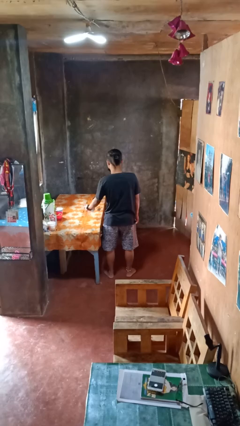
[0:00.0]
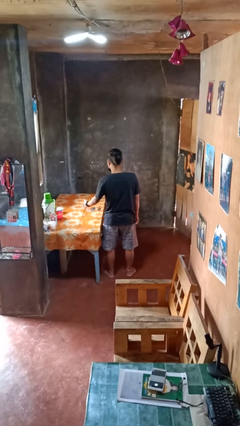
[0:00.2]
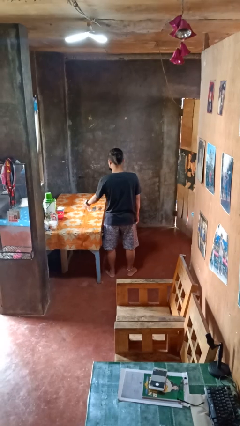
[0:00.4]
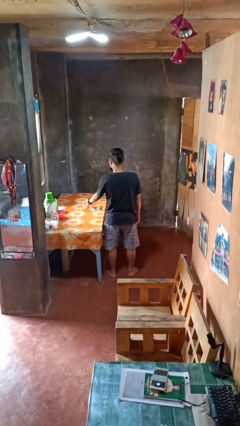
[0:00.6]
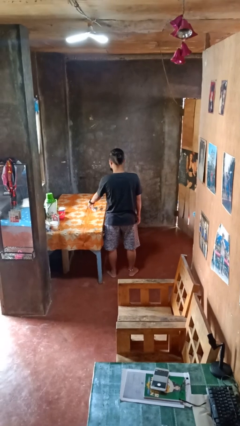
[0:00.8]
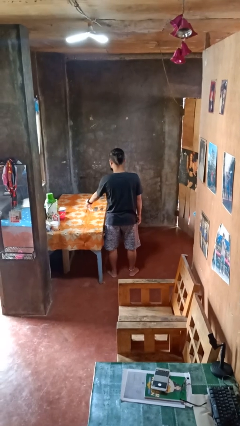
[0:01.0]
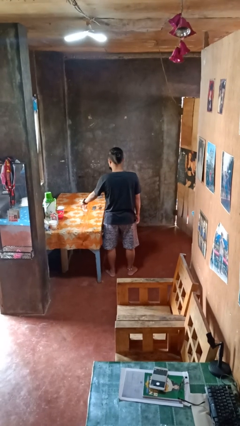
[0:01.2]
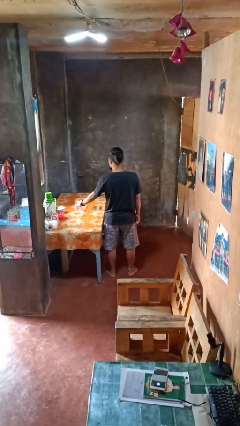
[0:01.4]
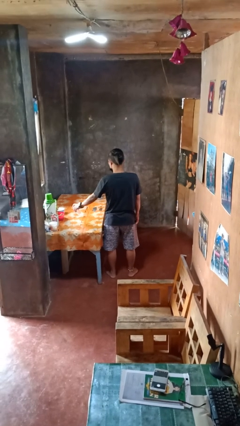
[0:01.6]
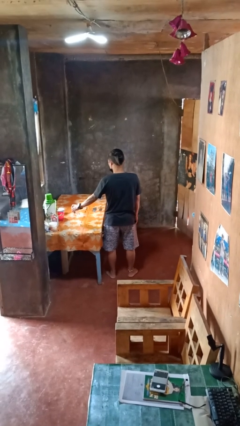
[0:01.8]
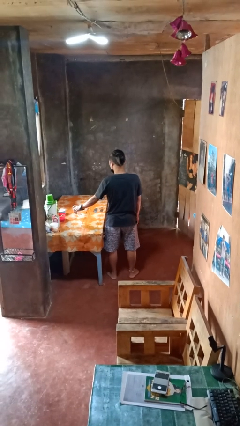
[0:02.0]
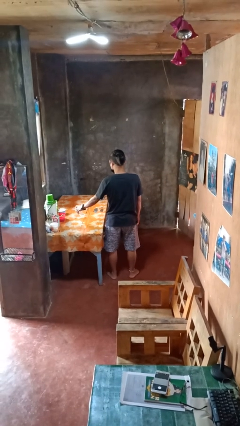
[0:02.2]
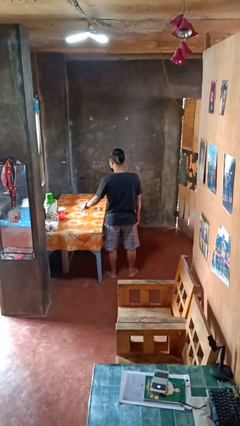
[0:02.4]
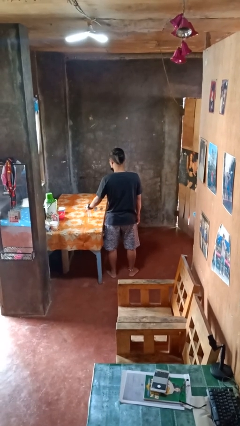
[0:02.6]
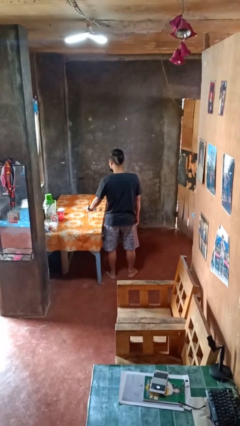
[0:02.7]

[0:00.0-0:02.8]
person sprays from bottle

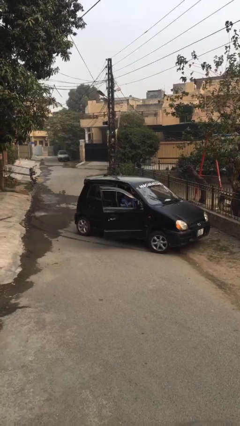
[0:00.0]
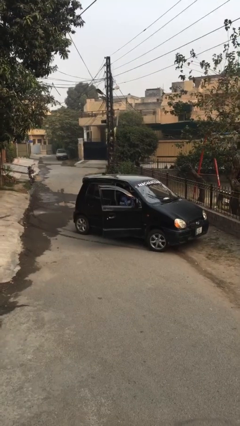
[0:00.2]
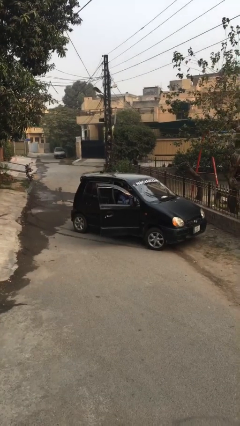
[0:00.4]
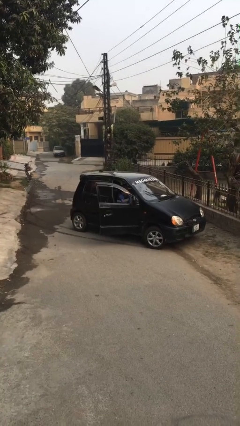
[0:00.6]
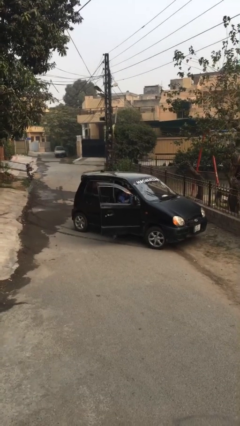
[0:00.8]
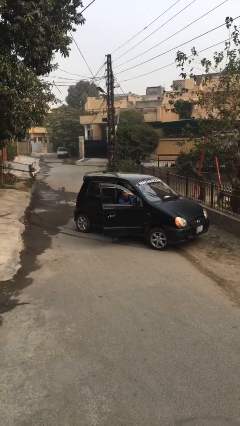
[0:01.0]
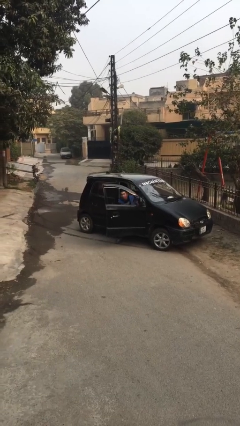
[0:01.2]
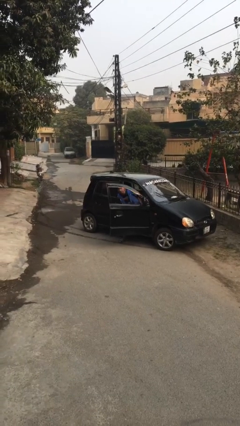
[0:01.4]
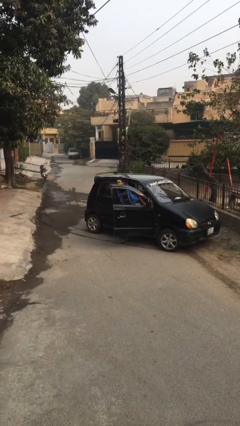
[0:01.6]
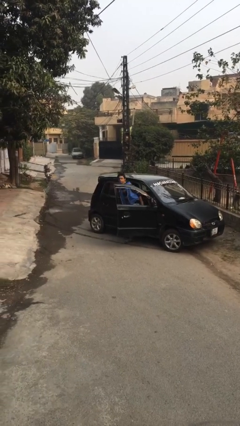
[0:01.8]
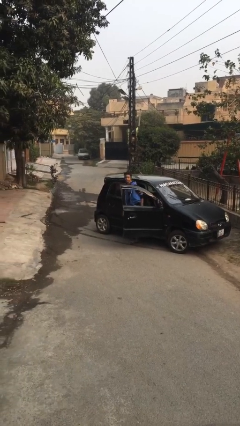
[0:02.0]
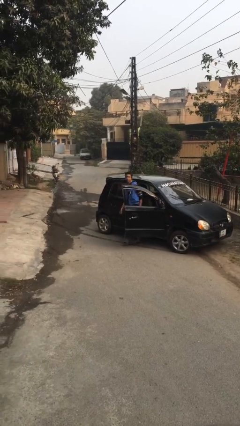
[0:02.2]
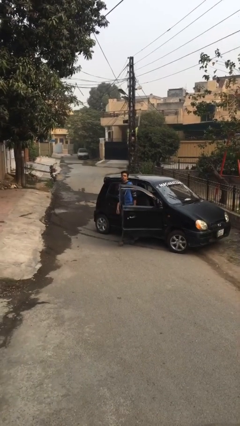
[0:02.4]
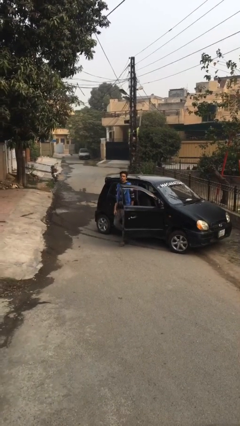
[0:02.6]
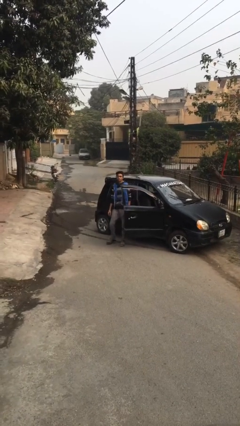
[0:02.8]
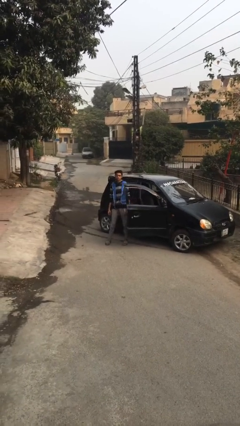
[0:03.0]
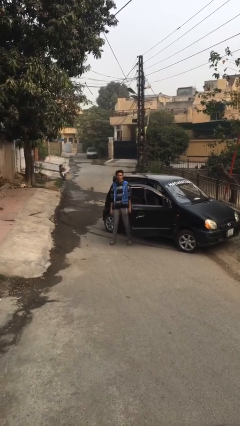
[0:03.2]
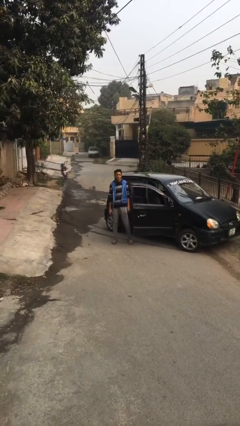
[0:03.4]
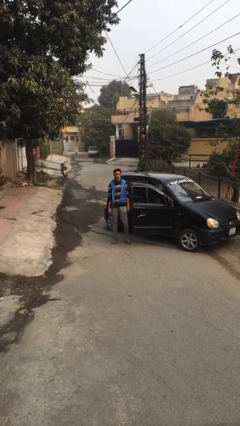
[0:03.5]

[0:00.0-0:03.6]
person exits car

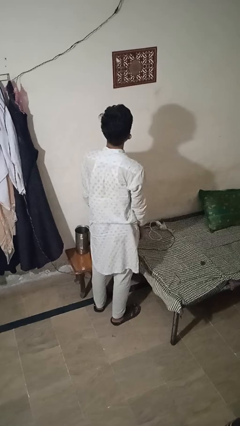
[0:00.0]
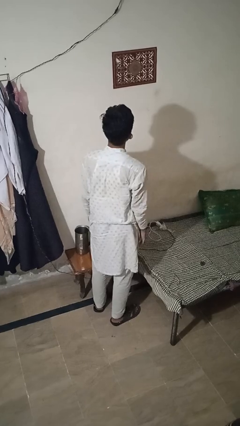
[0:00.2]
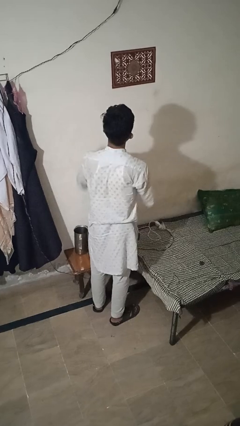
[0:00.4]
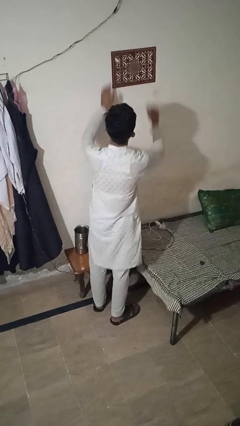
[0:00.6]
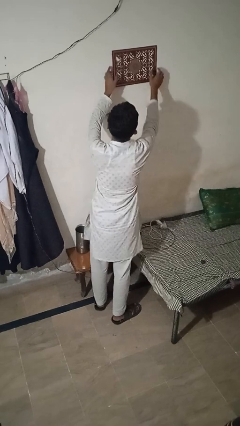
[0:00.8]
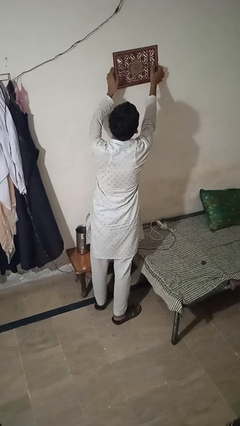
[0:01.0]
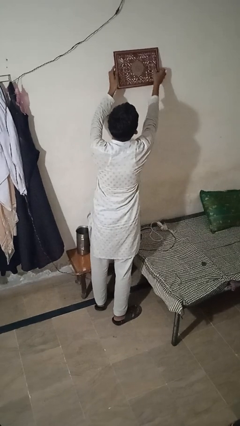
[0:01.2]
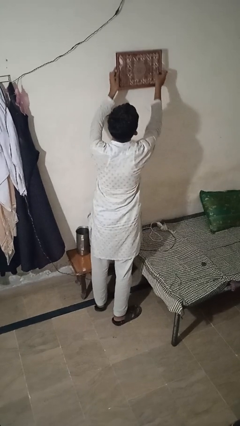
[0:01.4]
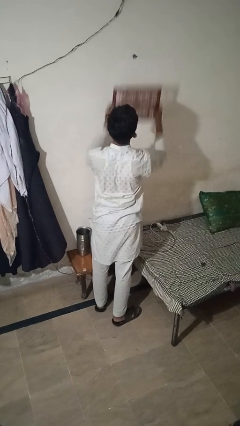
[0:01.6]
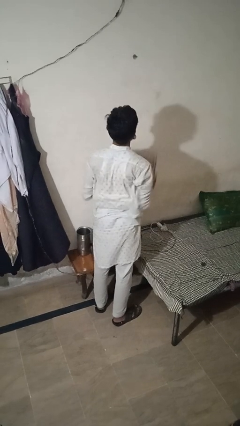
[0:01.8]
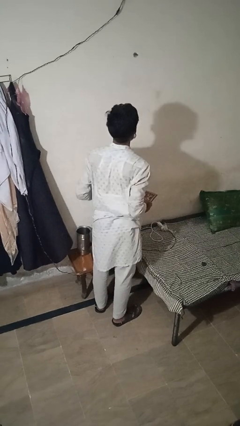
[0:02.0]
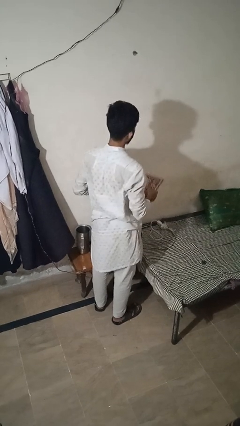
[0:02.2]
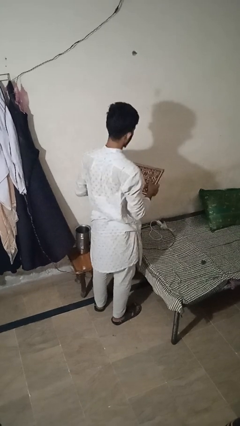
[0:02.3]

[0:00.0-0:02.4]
person takes down picture frame

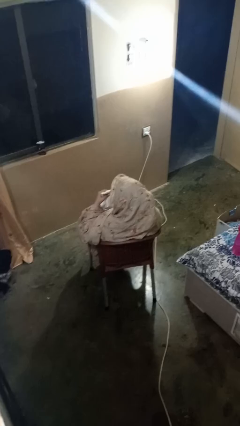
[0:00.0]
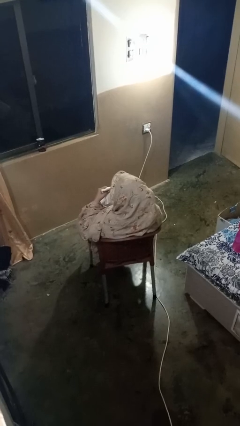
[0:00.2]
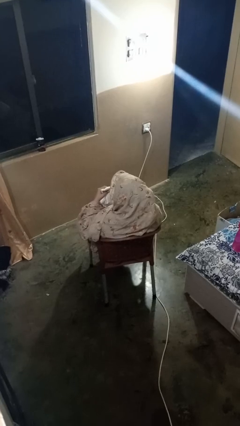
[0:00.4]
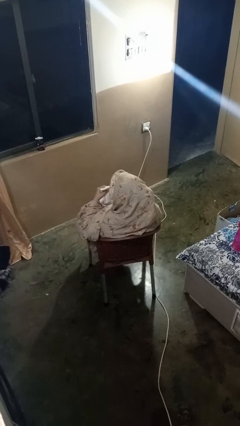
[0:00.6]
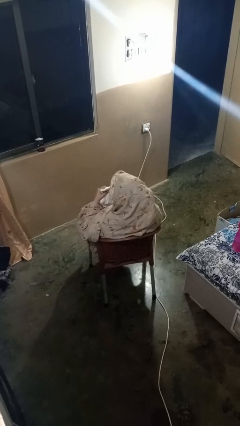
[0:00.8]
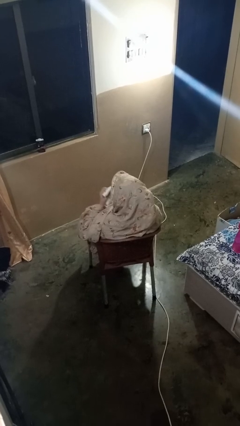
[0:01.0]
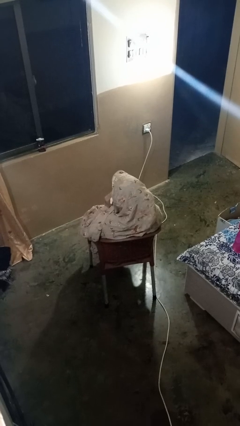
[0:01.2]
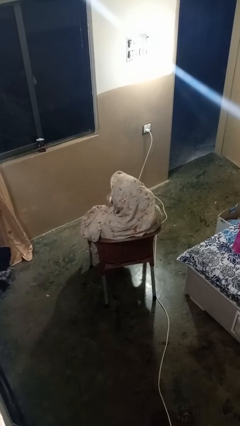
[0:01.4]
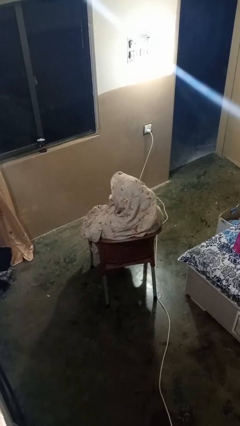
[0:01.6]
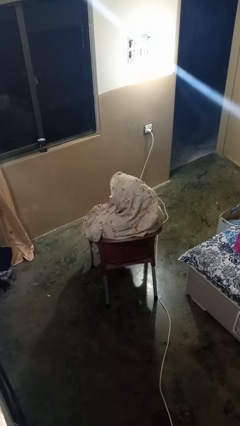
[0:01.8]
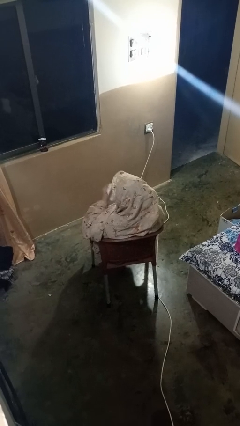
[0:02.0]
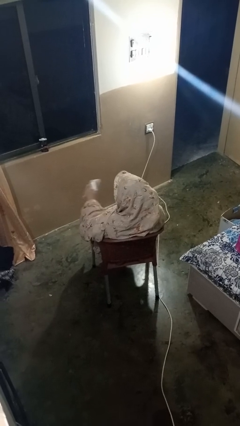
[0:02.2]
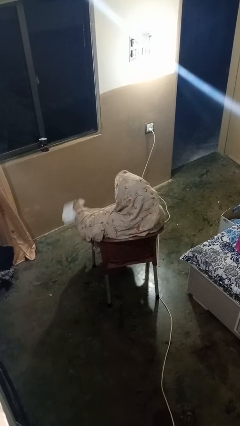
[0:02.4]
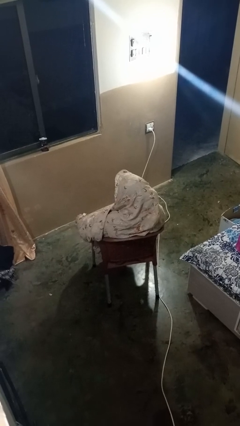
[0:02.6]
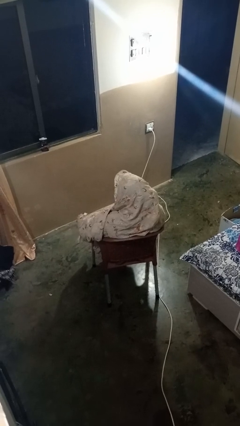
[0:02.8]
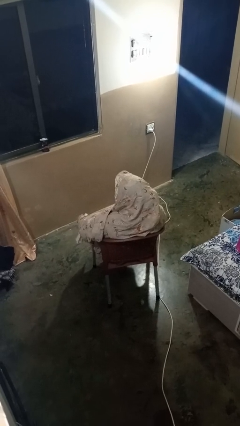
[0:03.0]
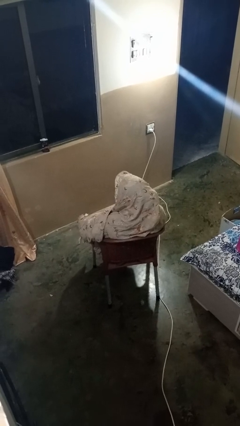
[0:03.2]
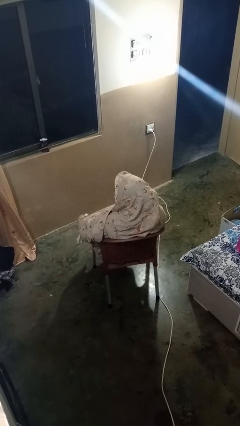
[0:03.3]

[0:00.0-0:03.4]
person wipes mouth with napkin

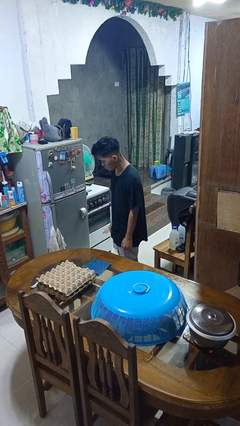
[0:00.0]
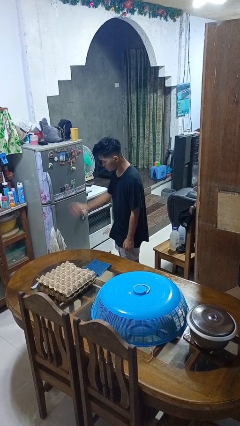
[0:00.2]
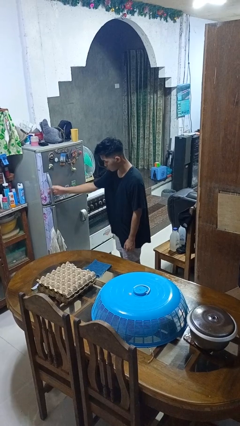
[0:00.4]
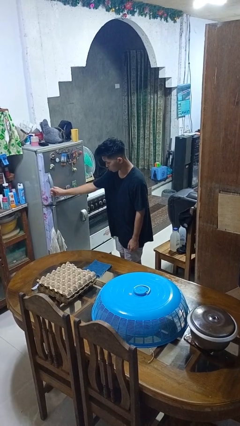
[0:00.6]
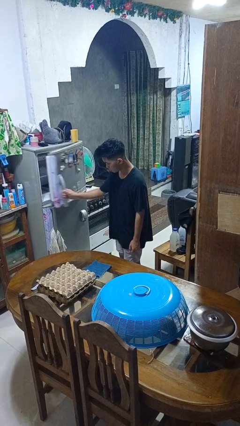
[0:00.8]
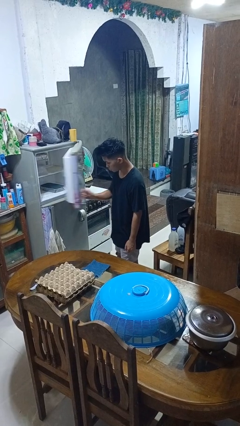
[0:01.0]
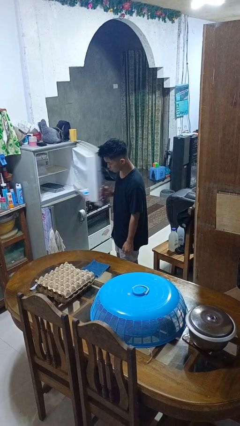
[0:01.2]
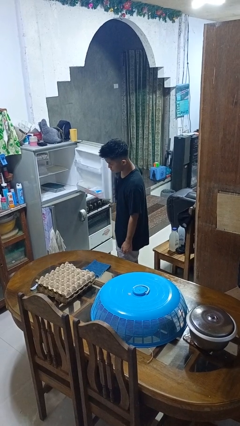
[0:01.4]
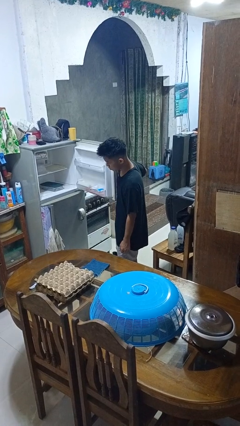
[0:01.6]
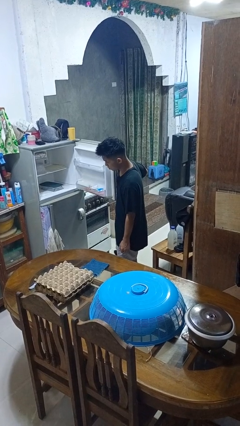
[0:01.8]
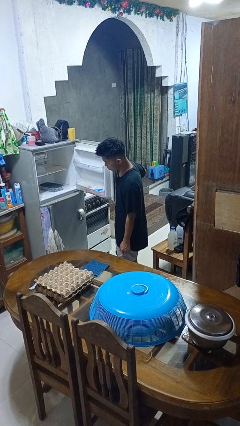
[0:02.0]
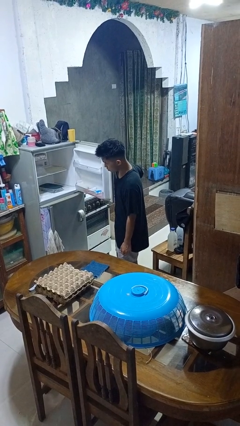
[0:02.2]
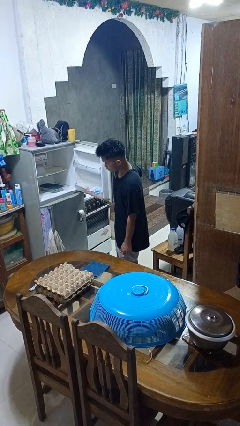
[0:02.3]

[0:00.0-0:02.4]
person opens refrigerator

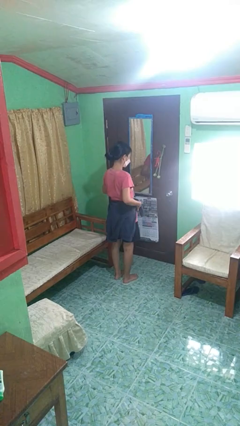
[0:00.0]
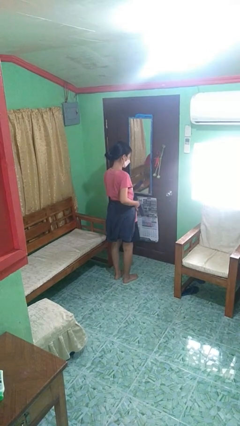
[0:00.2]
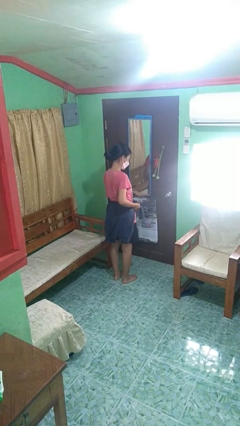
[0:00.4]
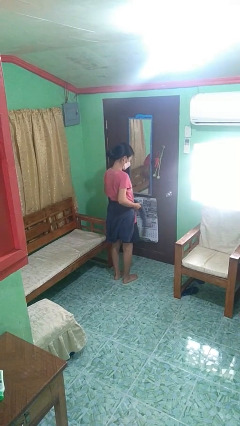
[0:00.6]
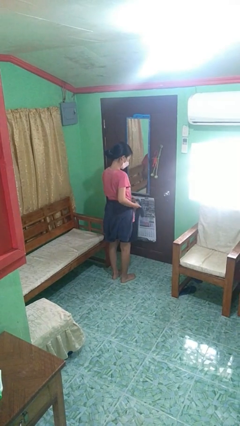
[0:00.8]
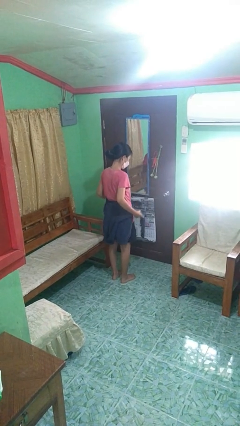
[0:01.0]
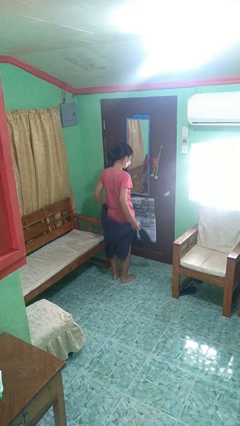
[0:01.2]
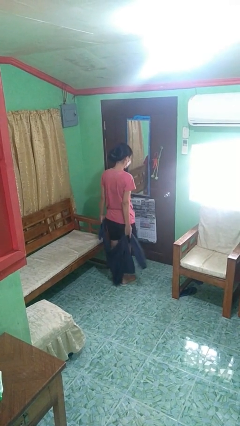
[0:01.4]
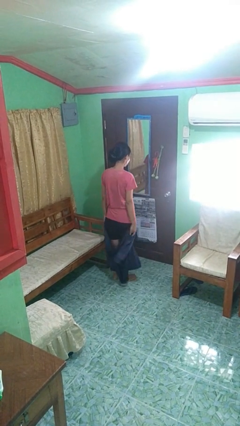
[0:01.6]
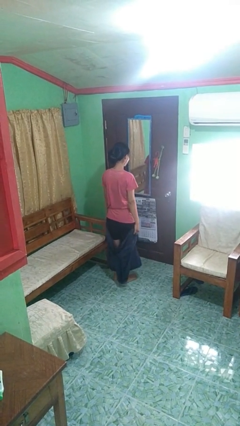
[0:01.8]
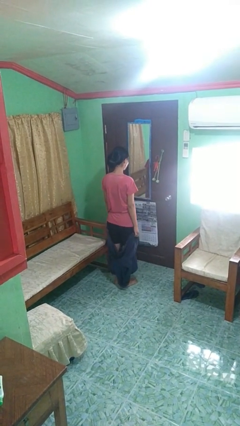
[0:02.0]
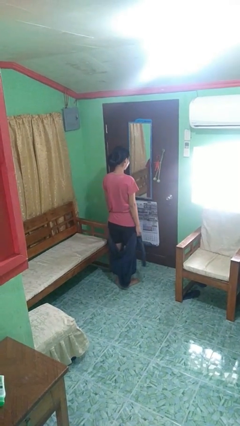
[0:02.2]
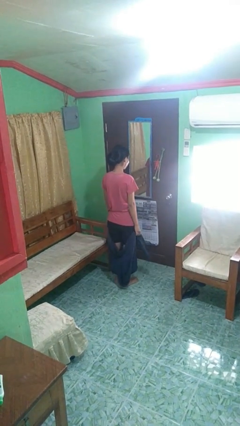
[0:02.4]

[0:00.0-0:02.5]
person unties jacket around waist

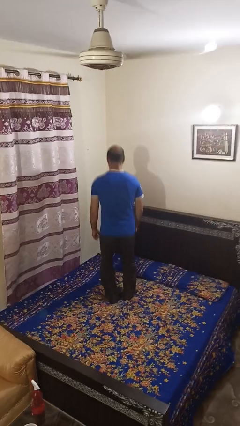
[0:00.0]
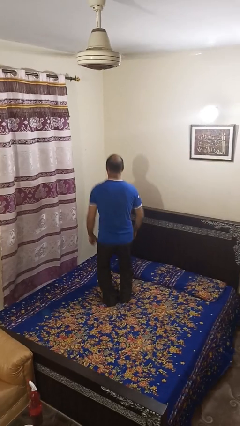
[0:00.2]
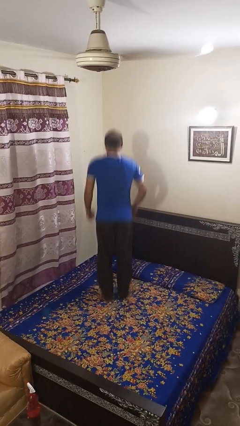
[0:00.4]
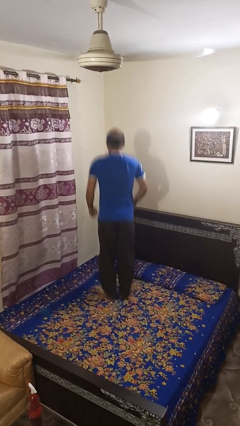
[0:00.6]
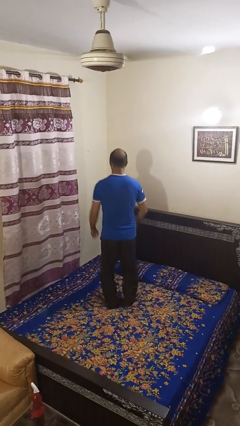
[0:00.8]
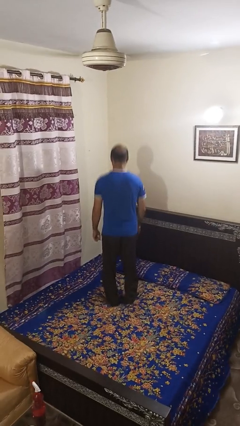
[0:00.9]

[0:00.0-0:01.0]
person jumps on bed
